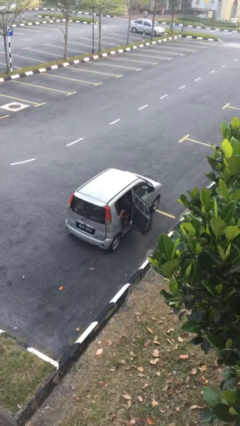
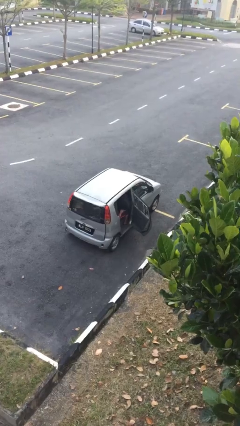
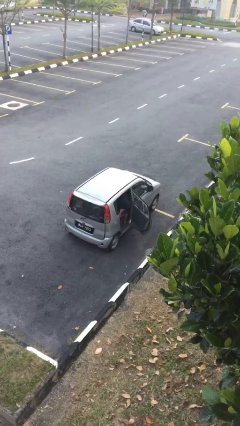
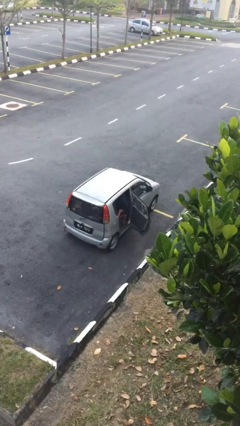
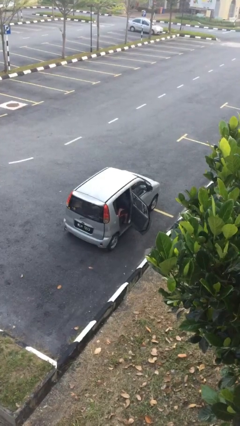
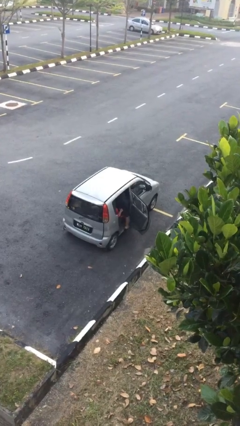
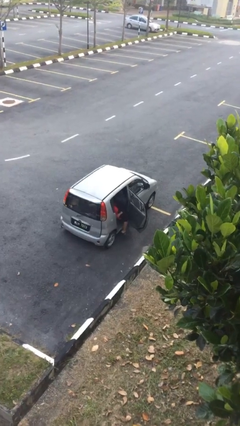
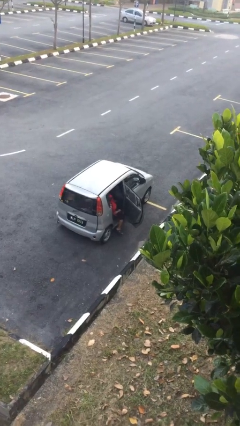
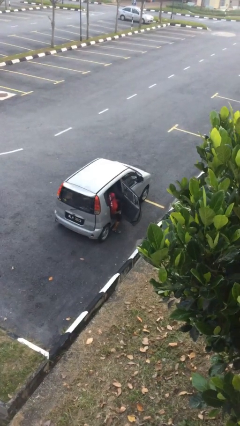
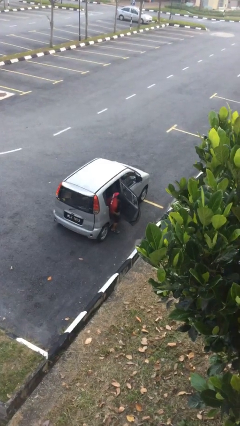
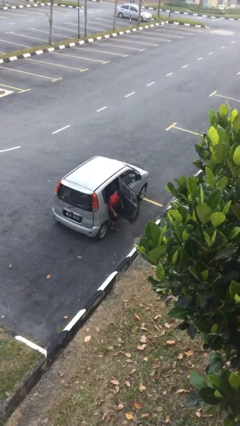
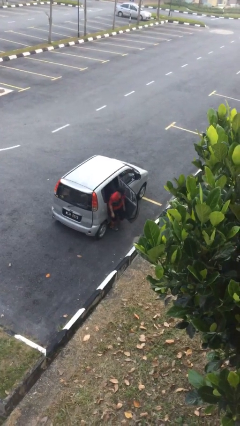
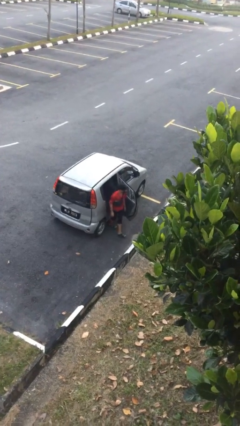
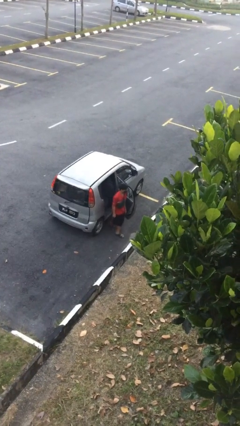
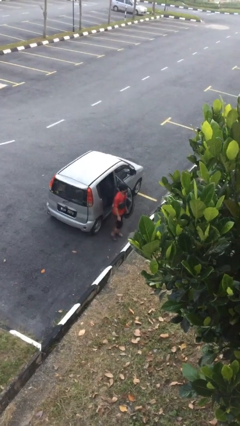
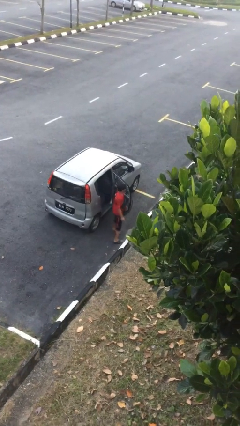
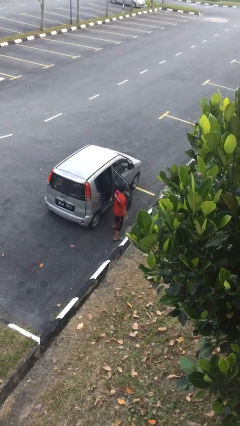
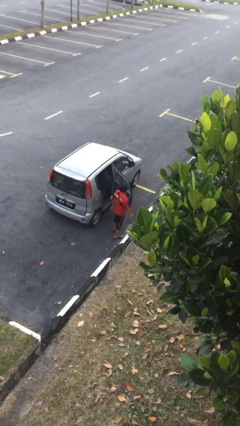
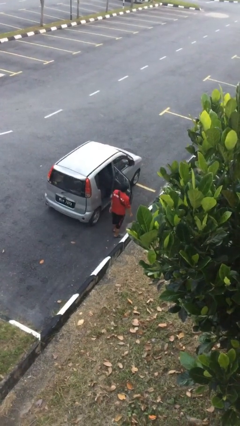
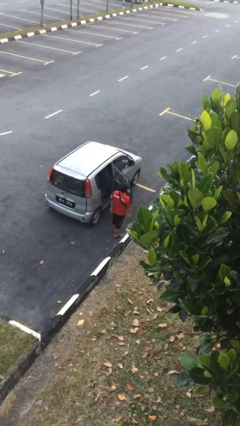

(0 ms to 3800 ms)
person exits car

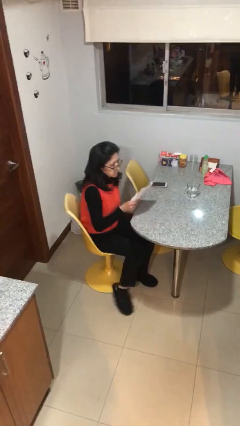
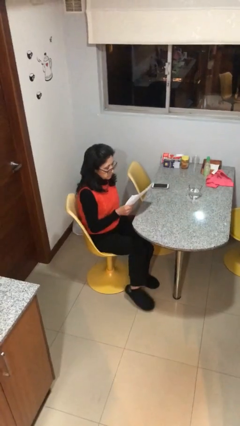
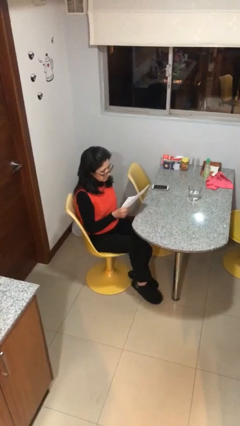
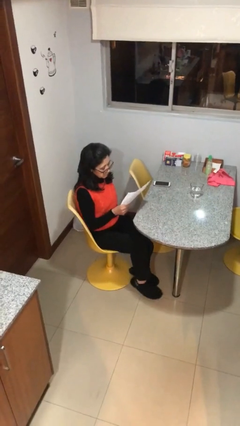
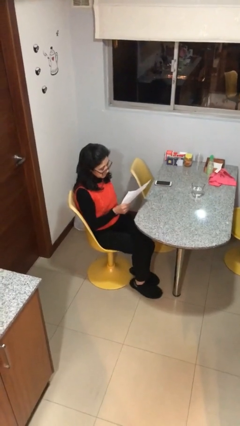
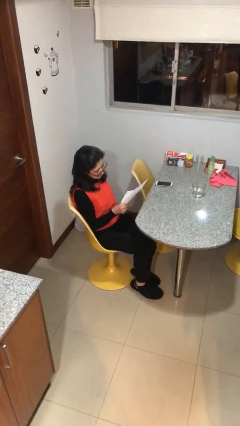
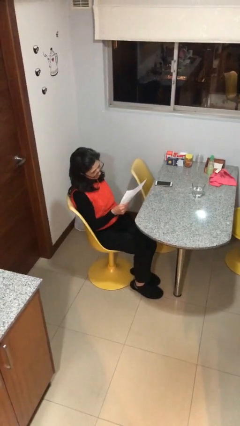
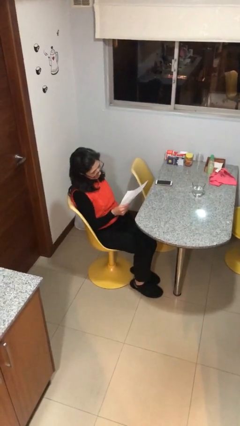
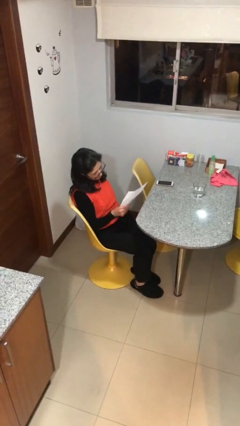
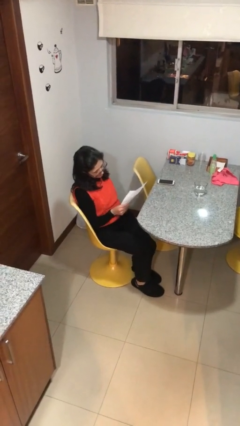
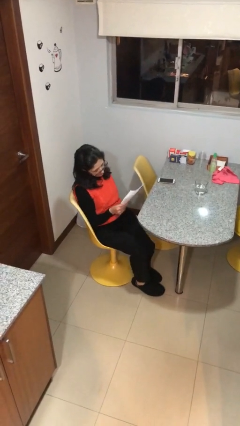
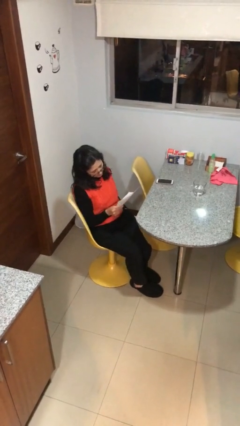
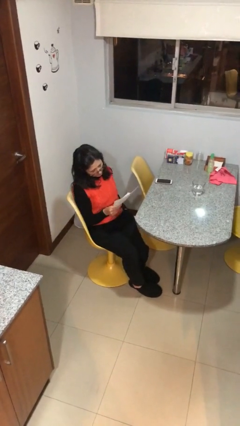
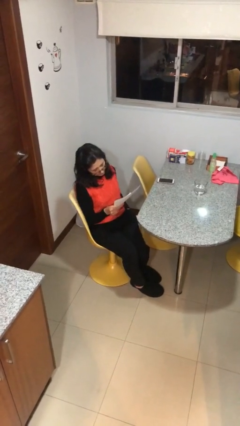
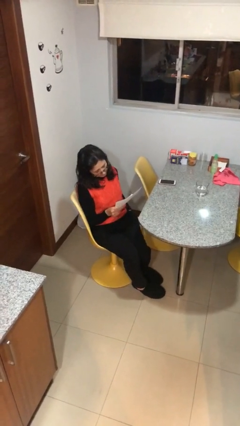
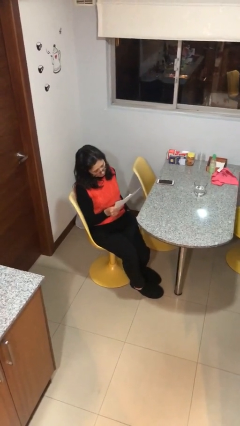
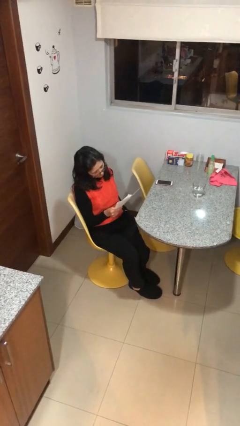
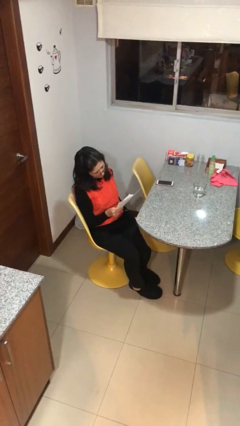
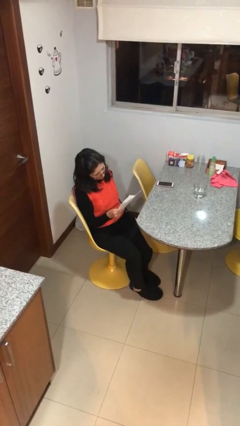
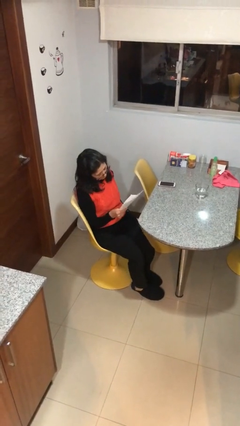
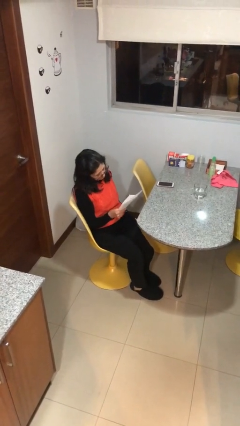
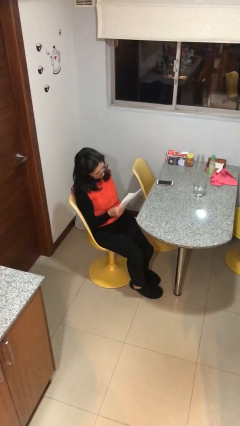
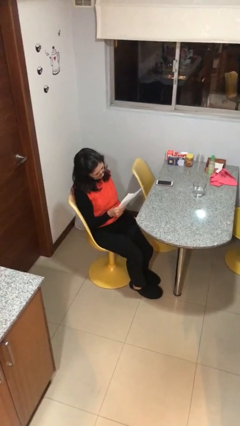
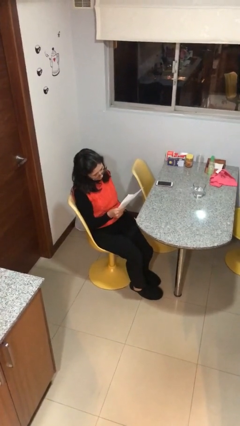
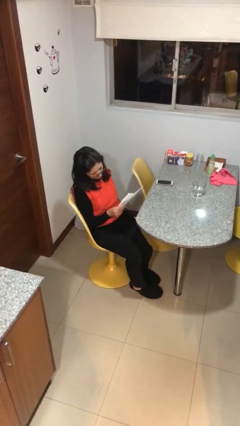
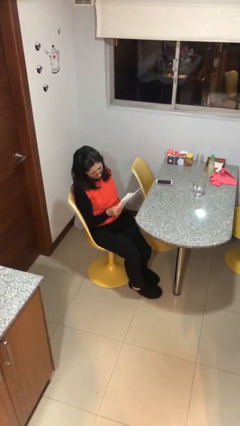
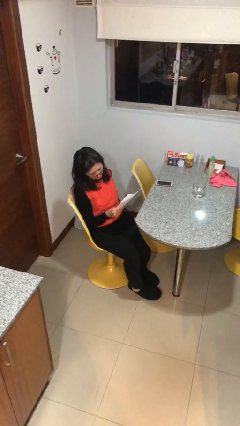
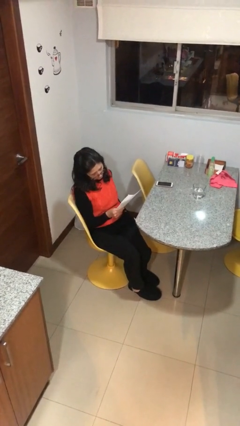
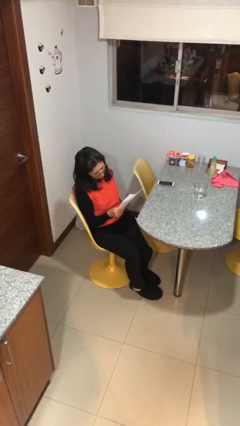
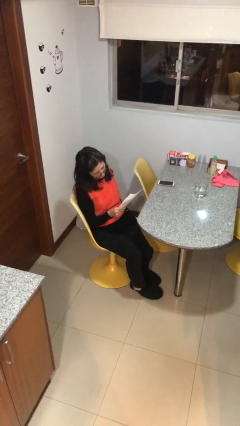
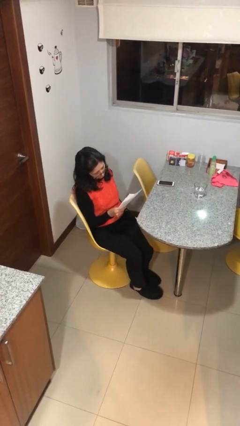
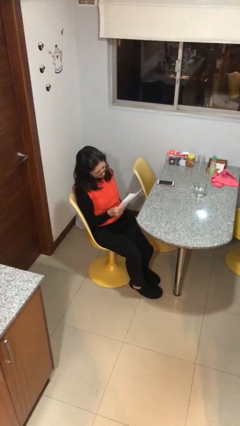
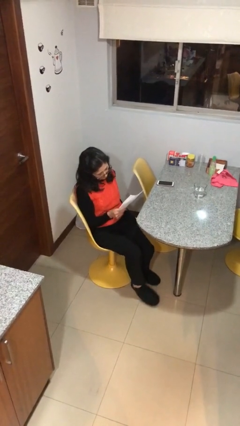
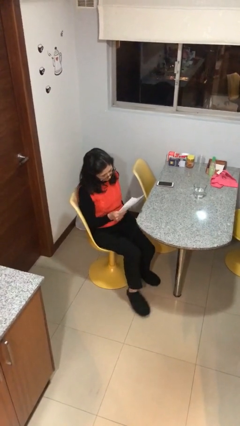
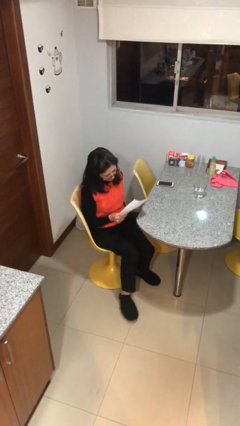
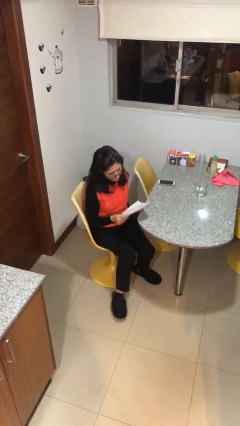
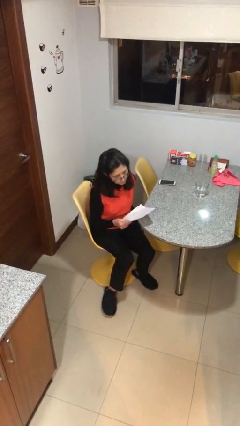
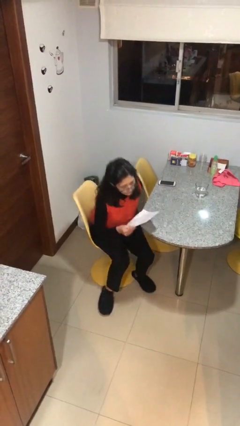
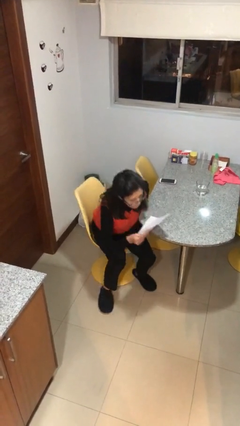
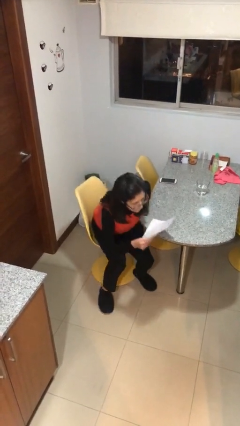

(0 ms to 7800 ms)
person reads document

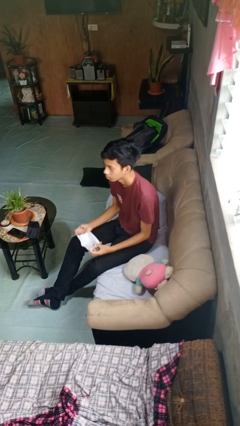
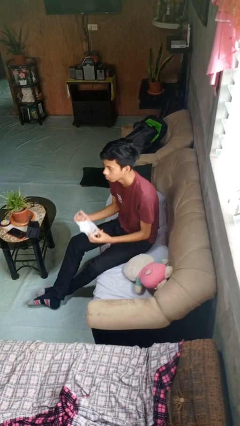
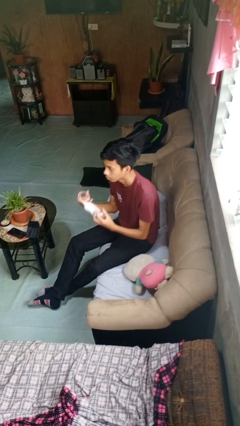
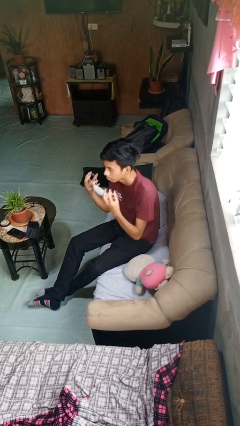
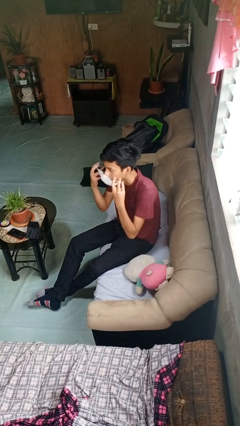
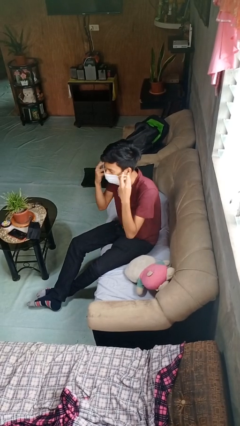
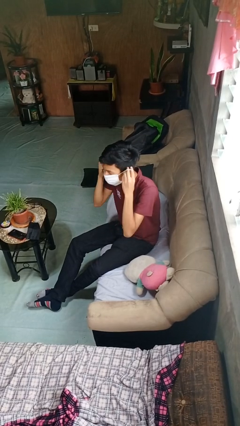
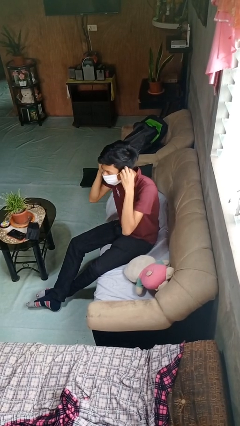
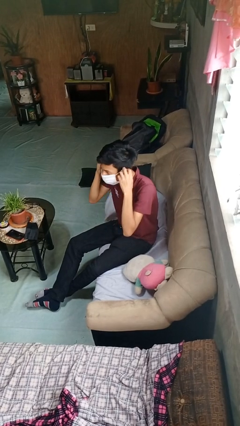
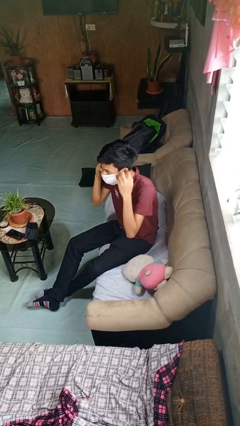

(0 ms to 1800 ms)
person puts on facemask

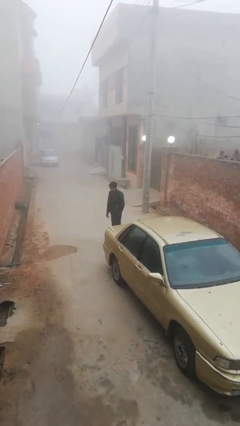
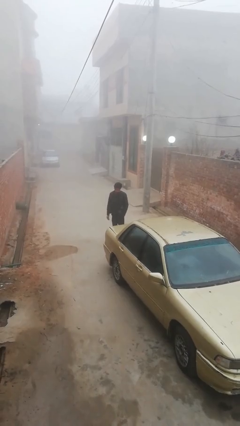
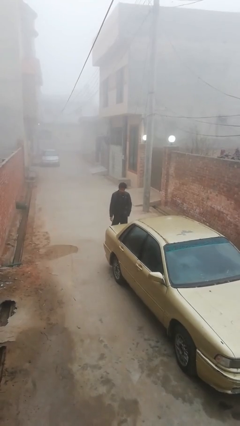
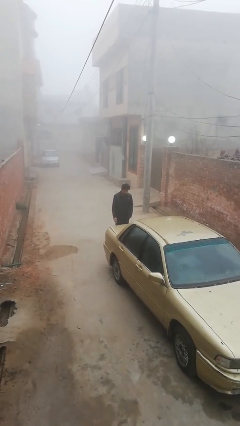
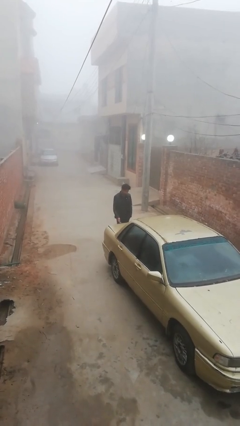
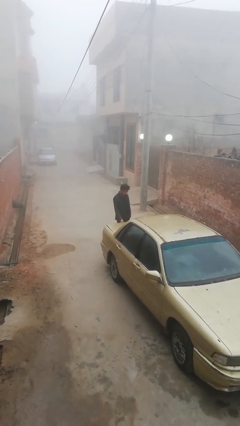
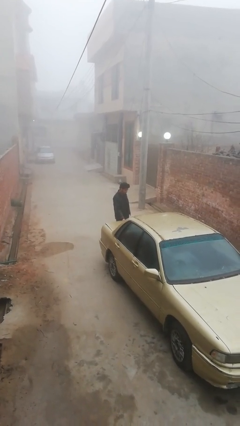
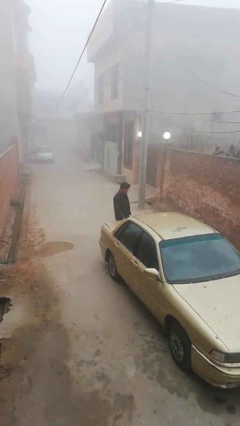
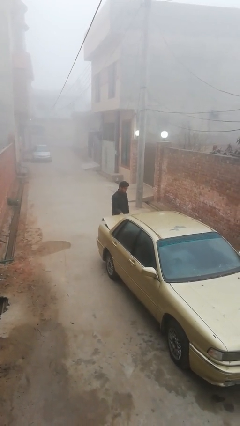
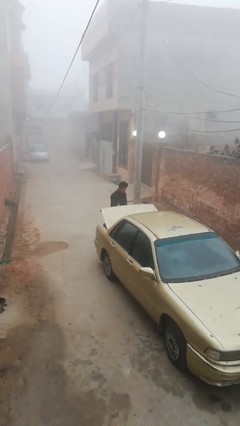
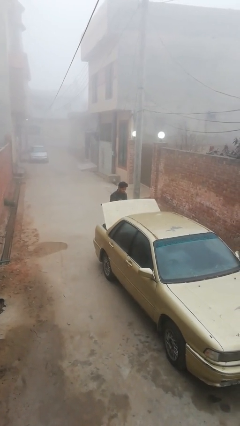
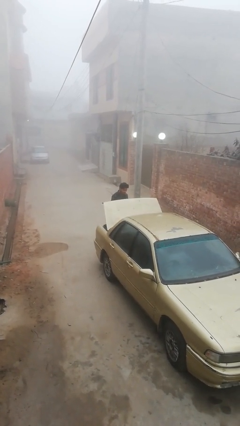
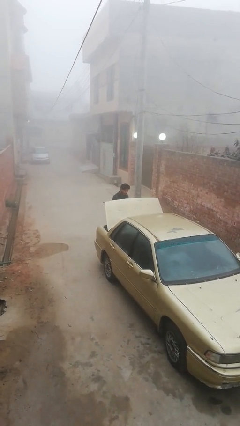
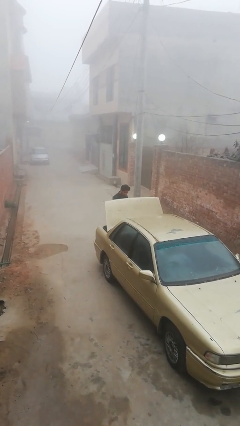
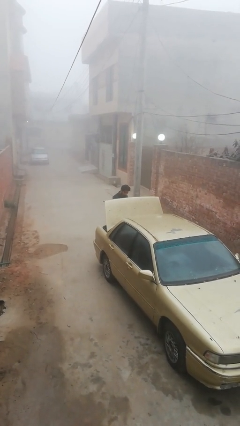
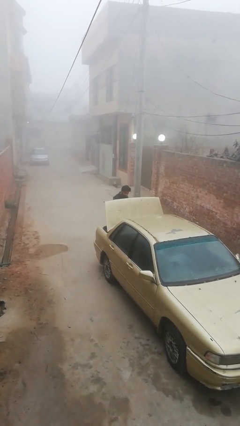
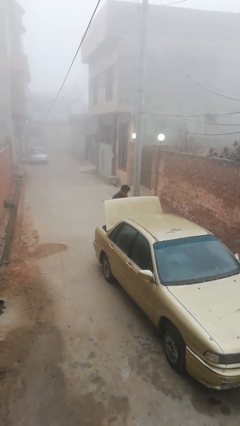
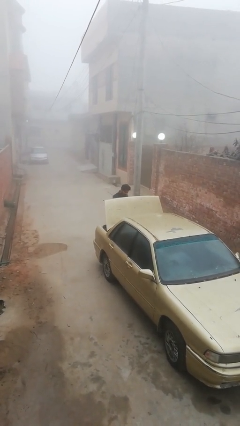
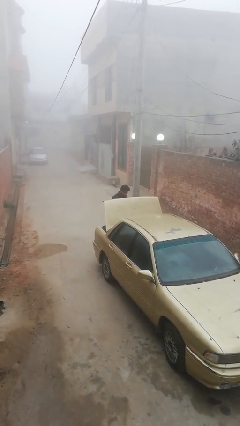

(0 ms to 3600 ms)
person opens car trunk

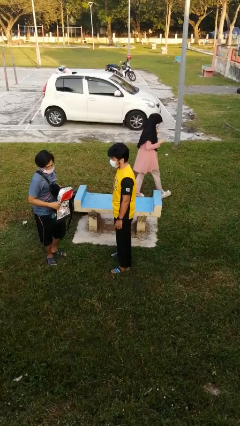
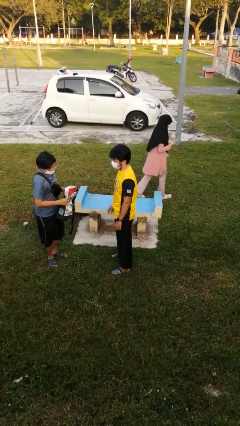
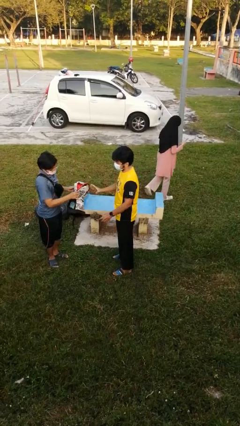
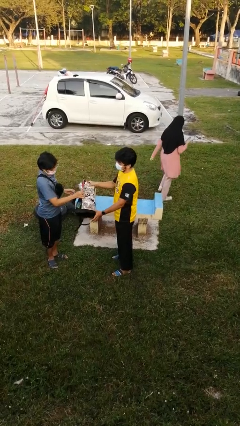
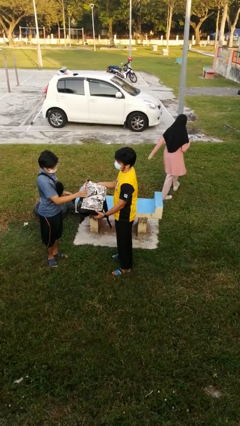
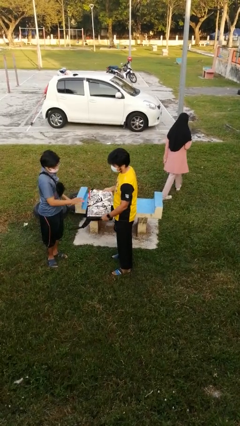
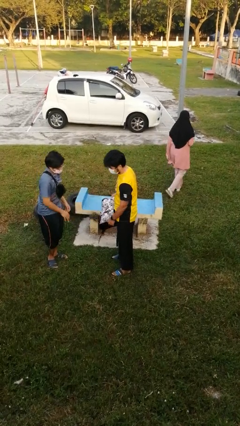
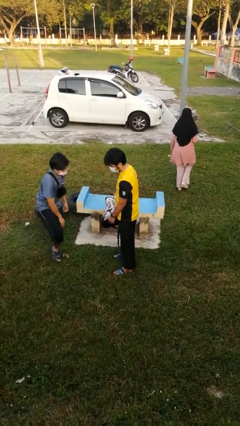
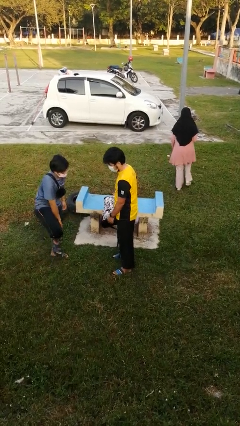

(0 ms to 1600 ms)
person transfers object to person
